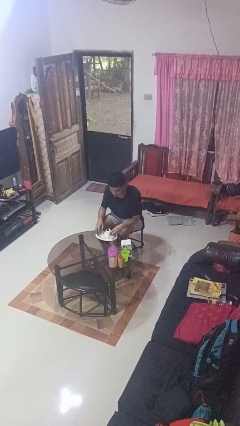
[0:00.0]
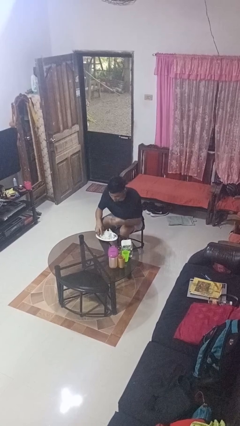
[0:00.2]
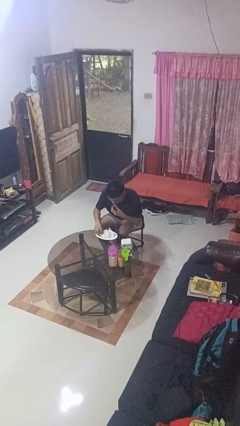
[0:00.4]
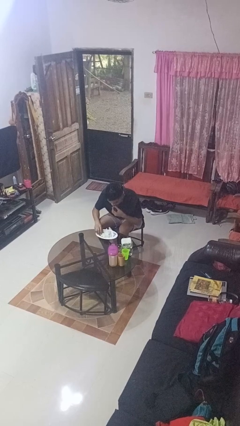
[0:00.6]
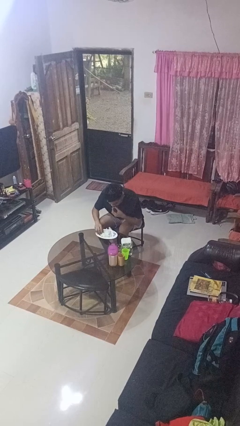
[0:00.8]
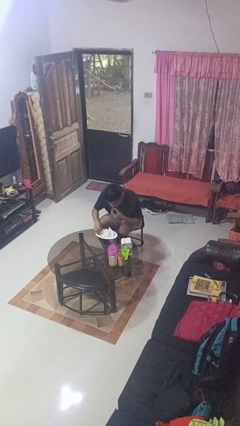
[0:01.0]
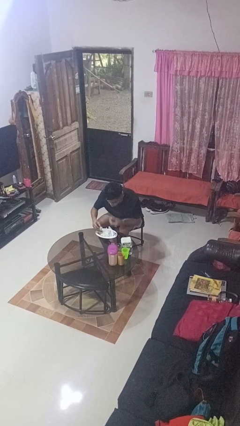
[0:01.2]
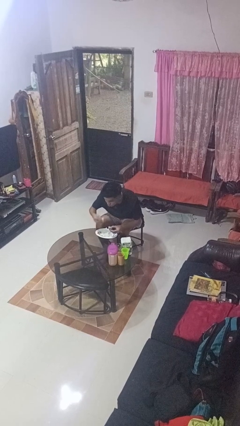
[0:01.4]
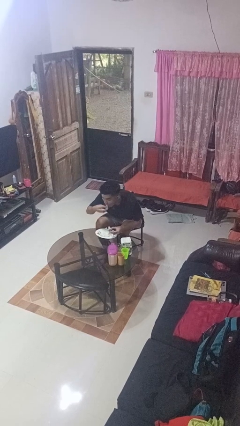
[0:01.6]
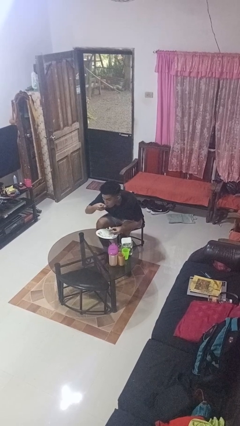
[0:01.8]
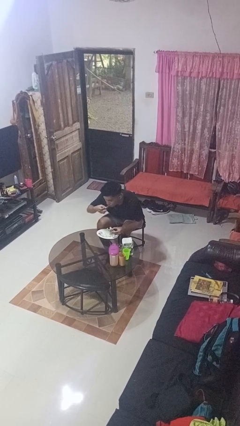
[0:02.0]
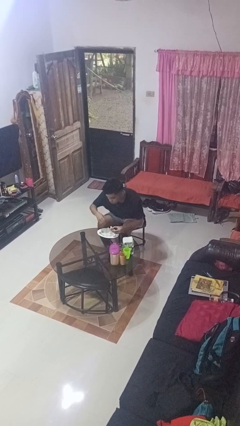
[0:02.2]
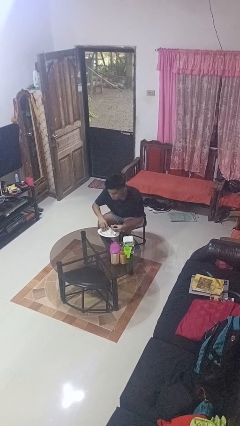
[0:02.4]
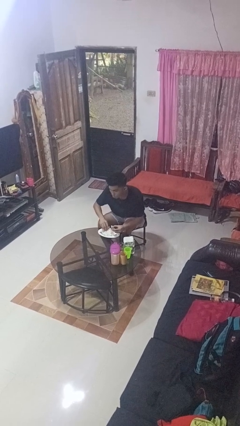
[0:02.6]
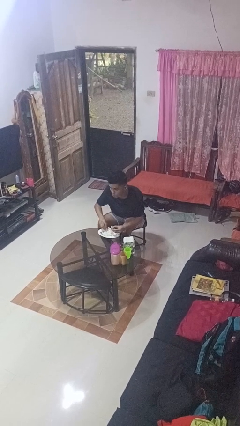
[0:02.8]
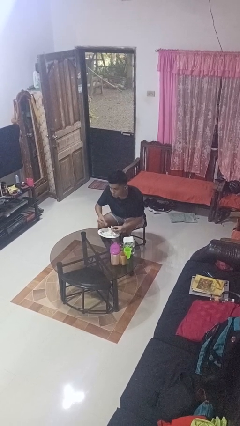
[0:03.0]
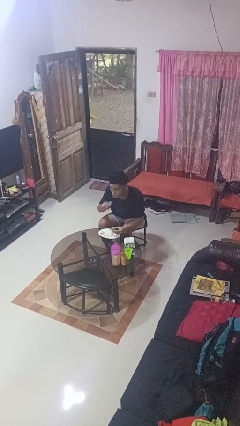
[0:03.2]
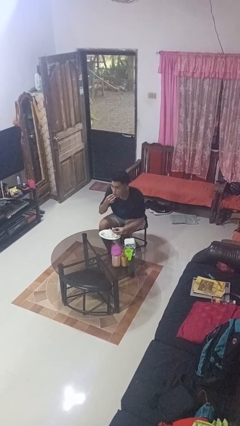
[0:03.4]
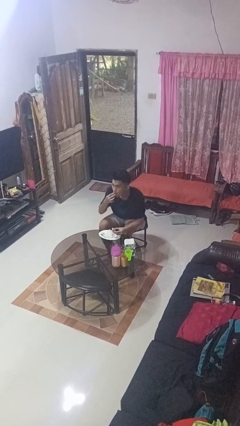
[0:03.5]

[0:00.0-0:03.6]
person eats with hands

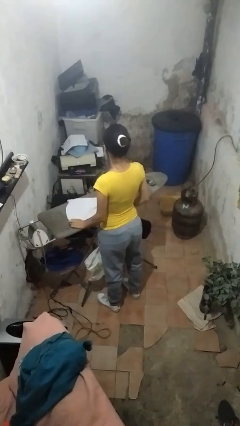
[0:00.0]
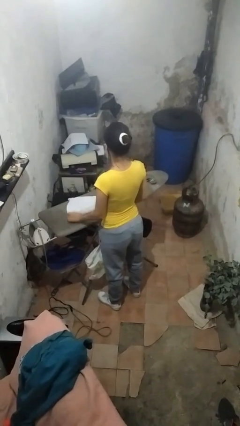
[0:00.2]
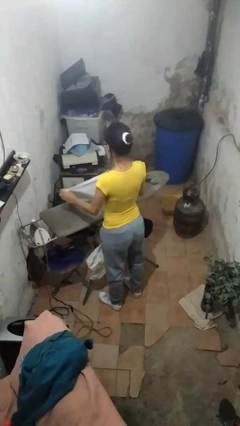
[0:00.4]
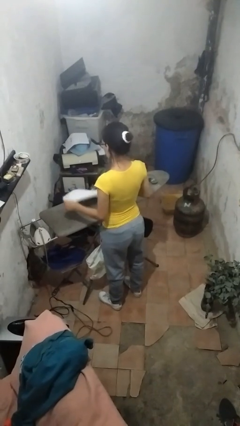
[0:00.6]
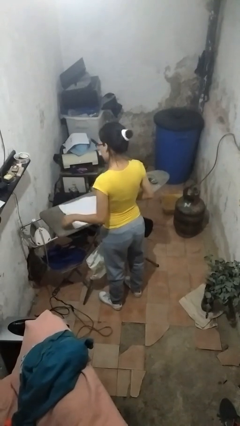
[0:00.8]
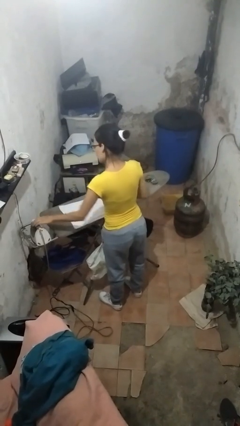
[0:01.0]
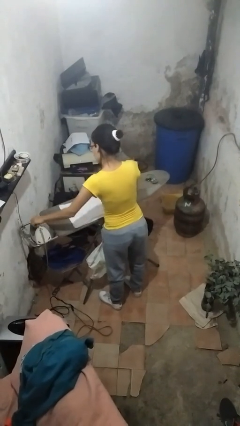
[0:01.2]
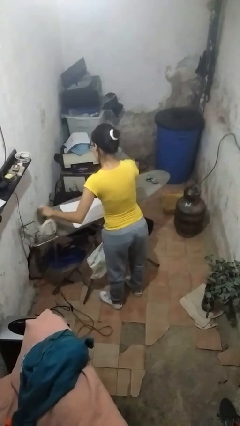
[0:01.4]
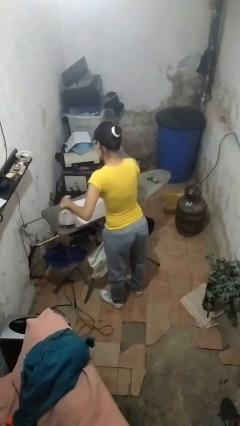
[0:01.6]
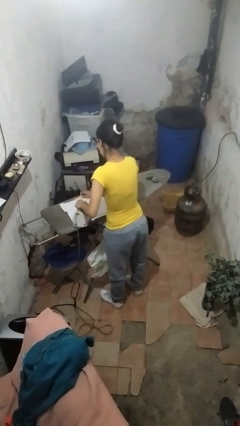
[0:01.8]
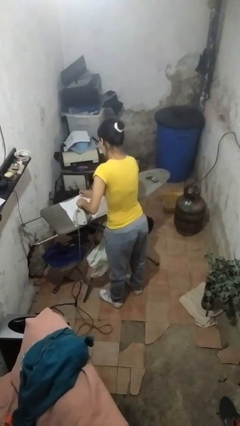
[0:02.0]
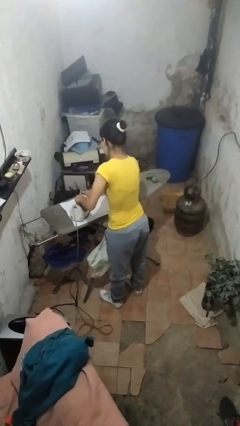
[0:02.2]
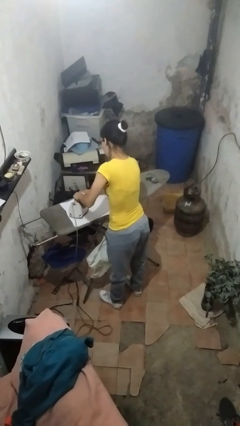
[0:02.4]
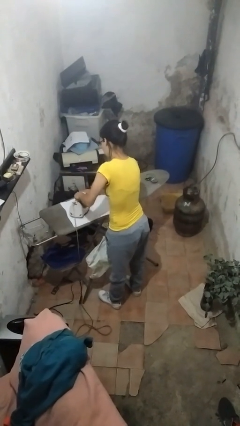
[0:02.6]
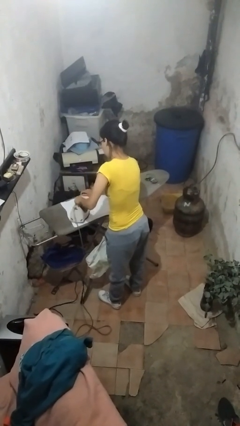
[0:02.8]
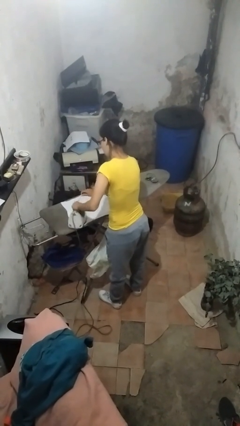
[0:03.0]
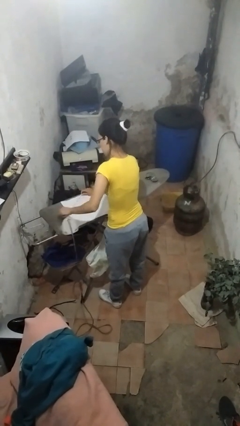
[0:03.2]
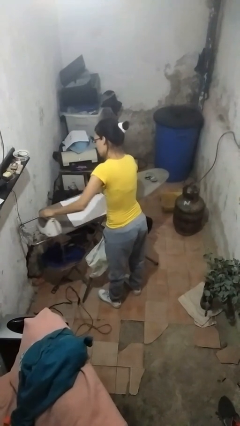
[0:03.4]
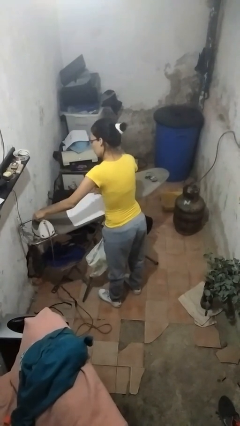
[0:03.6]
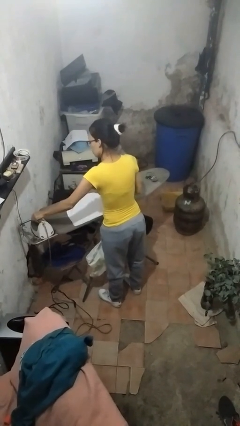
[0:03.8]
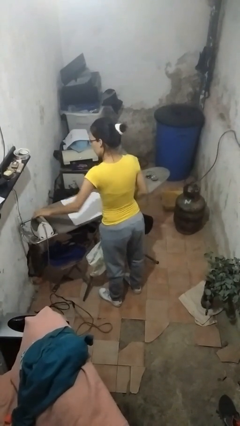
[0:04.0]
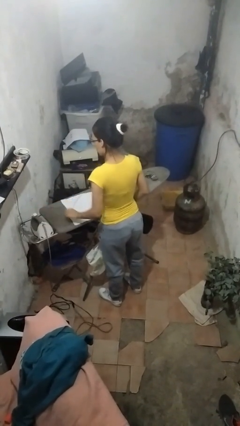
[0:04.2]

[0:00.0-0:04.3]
person irons clothes

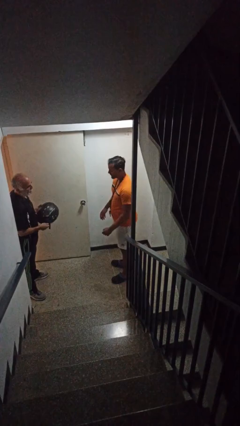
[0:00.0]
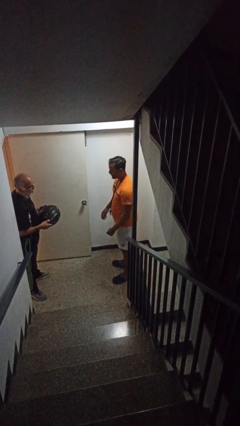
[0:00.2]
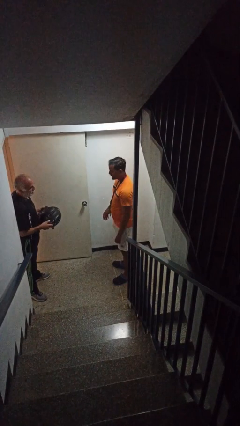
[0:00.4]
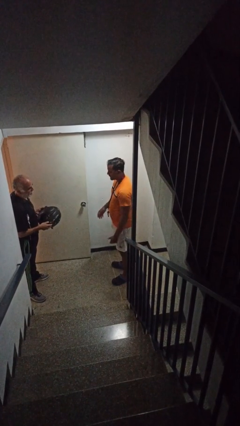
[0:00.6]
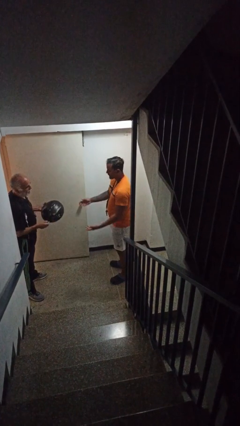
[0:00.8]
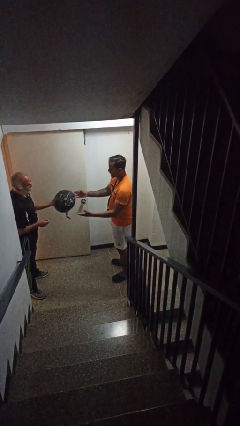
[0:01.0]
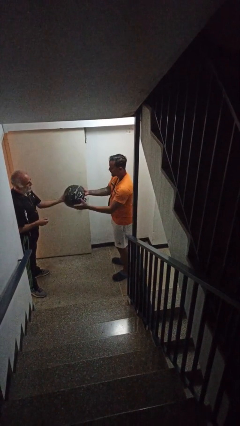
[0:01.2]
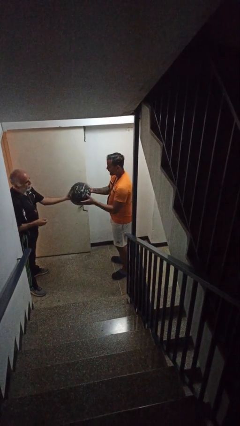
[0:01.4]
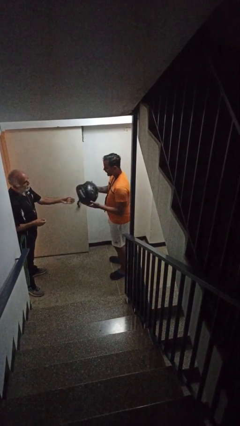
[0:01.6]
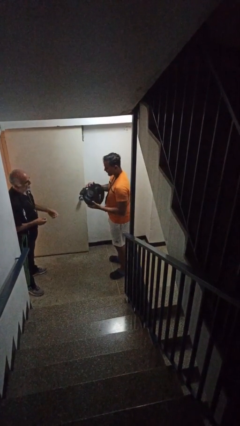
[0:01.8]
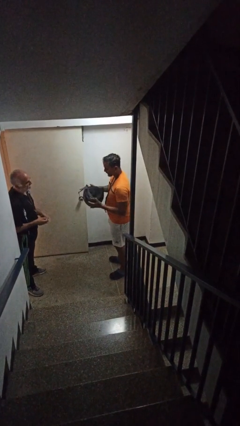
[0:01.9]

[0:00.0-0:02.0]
person transfers object to person

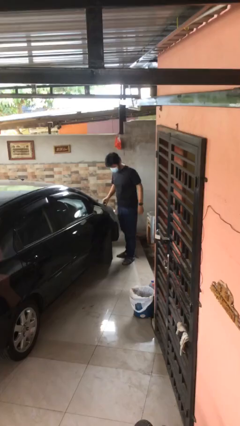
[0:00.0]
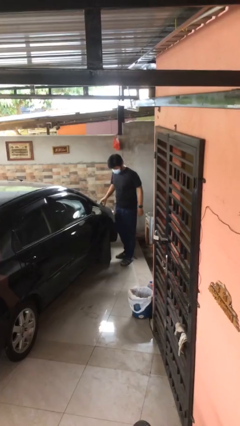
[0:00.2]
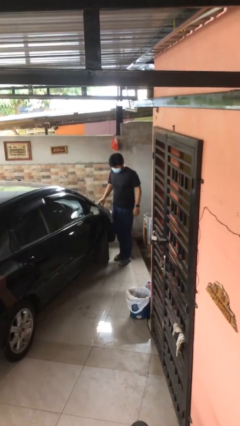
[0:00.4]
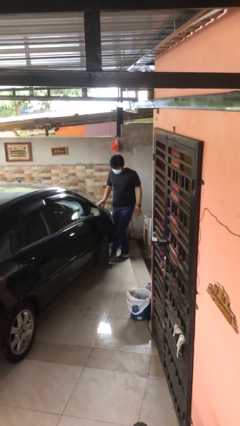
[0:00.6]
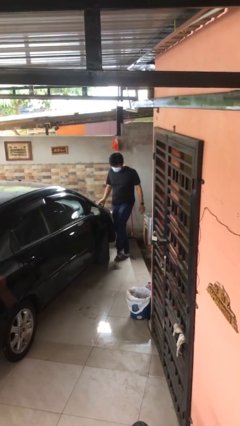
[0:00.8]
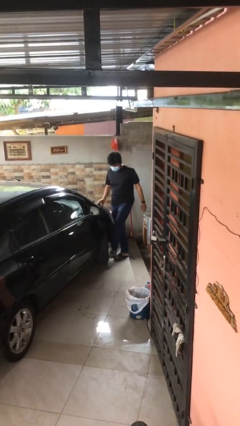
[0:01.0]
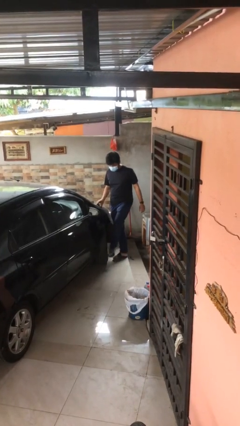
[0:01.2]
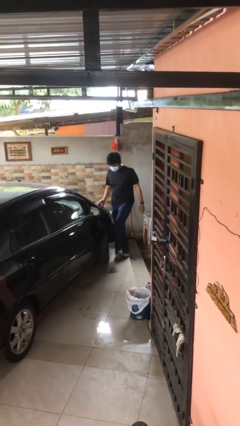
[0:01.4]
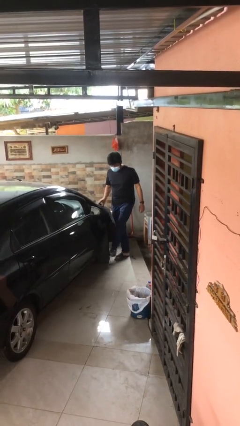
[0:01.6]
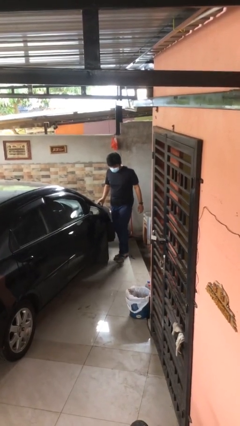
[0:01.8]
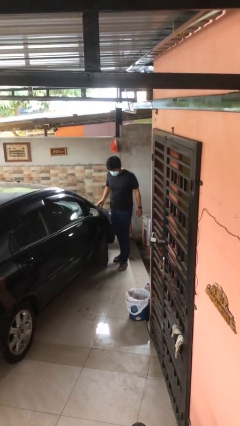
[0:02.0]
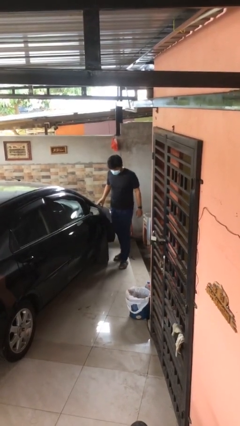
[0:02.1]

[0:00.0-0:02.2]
person kicks car tires

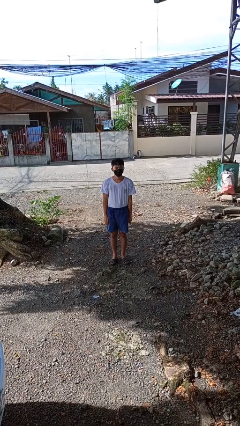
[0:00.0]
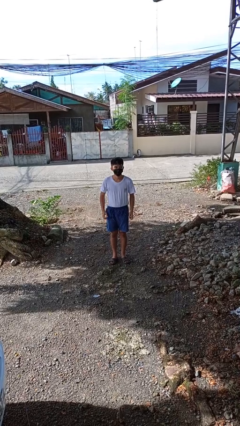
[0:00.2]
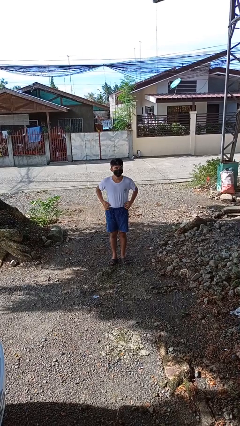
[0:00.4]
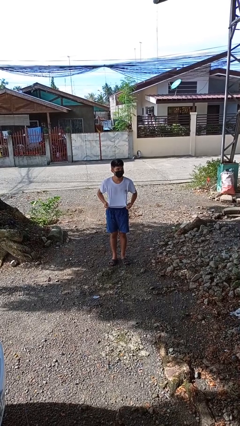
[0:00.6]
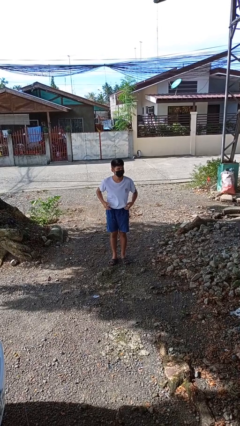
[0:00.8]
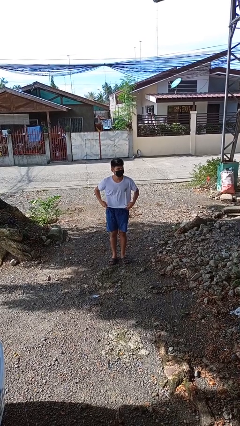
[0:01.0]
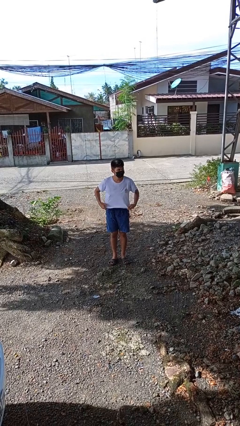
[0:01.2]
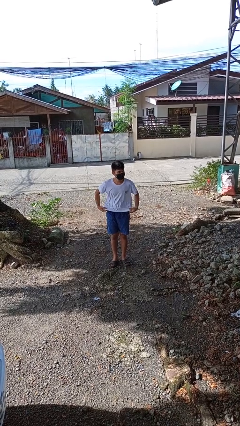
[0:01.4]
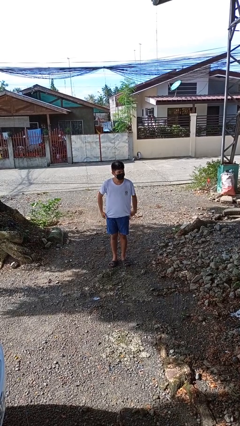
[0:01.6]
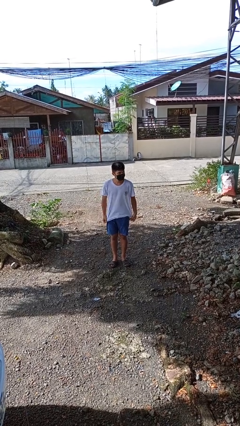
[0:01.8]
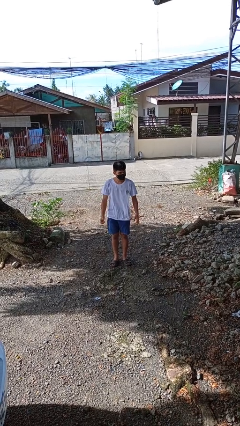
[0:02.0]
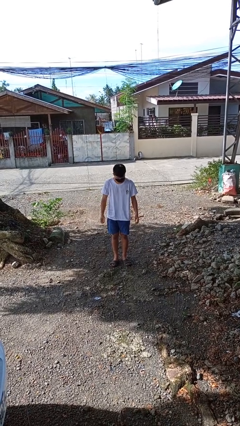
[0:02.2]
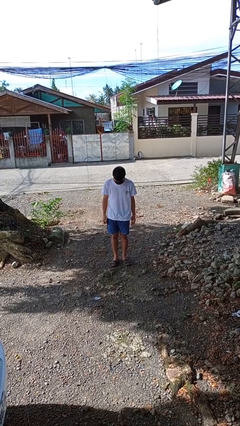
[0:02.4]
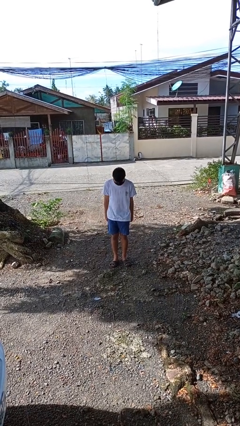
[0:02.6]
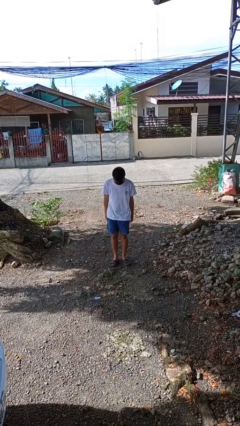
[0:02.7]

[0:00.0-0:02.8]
person untucks shirt

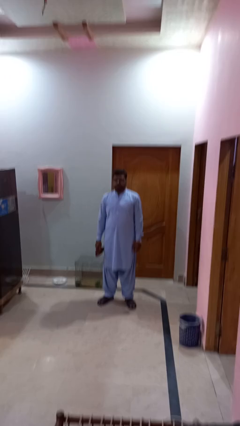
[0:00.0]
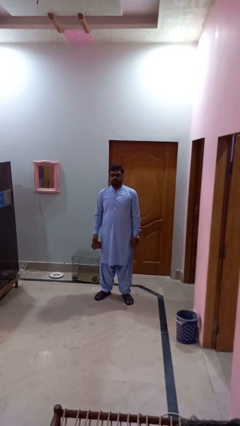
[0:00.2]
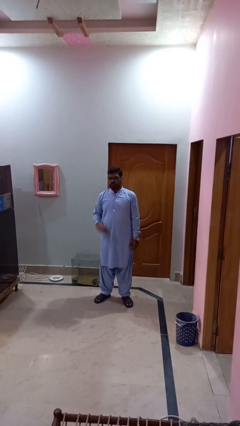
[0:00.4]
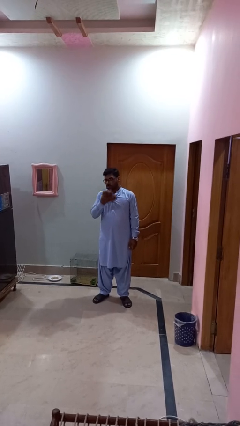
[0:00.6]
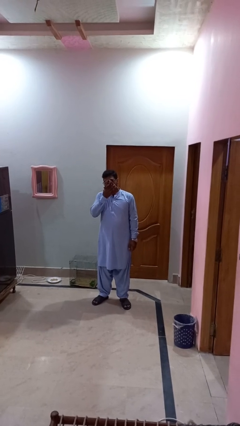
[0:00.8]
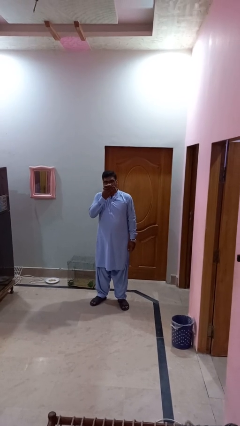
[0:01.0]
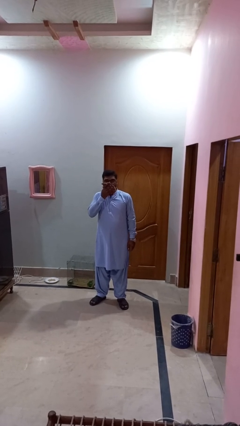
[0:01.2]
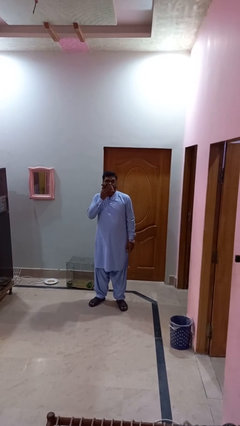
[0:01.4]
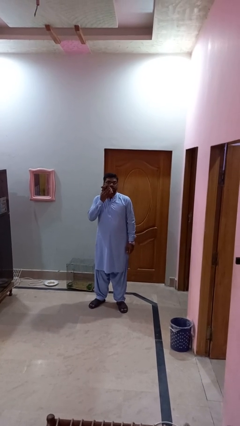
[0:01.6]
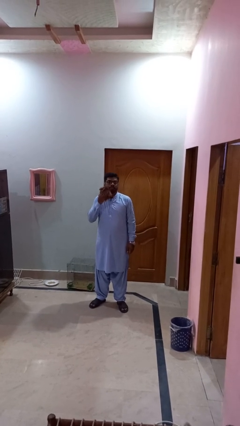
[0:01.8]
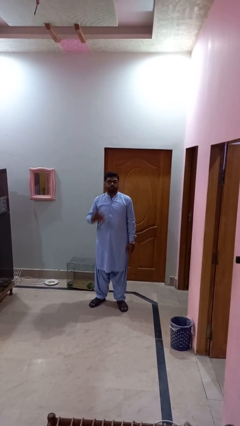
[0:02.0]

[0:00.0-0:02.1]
person wipes mouth with napkin

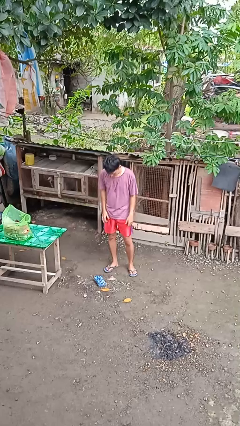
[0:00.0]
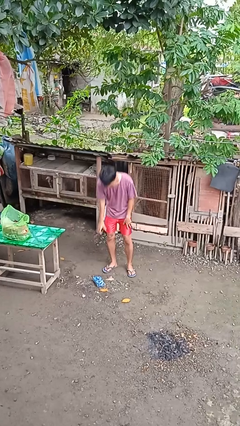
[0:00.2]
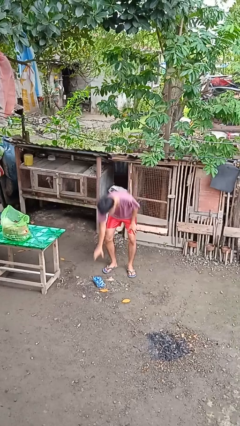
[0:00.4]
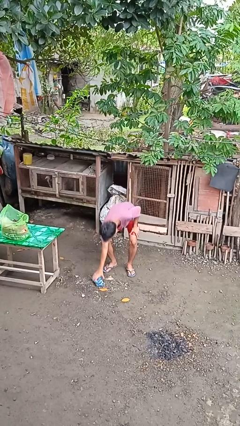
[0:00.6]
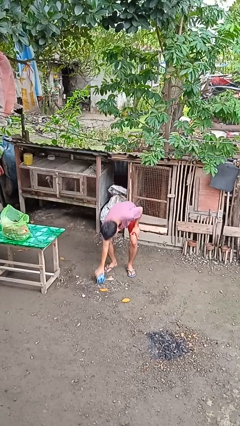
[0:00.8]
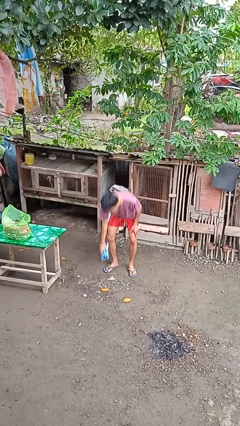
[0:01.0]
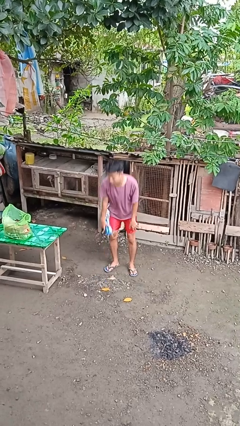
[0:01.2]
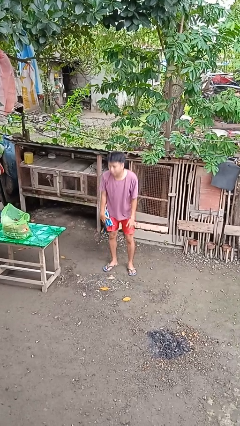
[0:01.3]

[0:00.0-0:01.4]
person picks up object from floor
